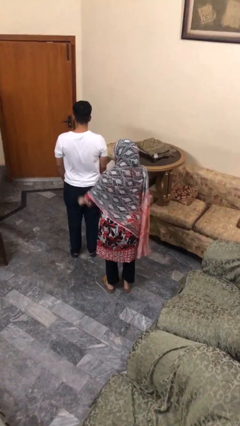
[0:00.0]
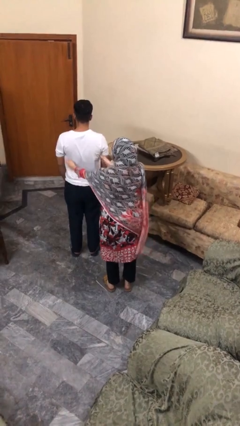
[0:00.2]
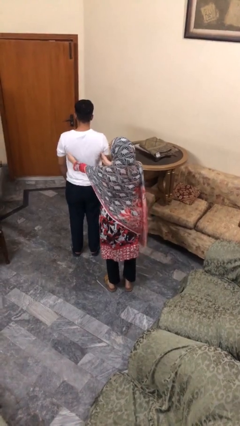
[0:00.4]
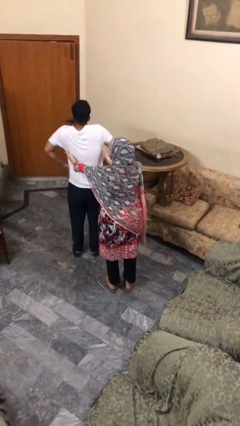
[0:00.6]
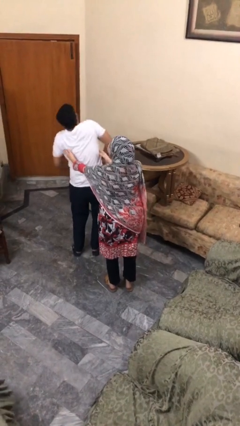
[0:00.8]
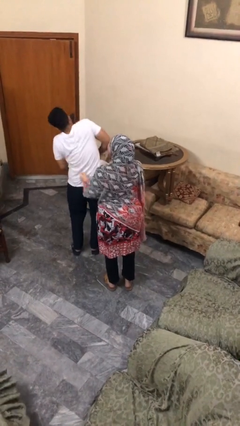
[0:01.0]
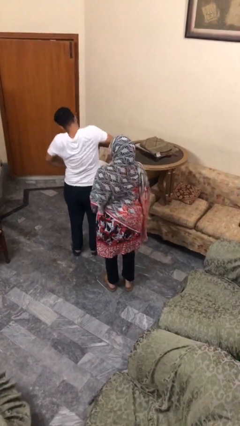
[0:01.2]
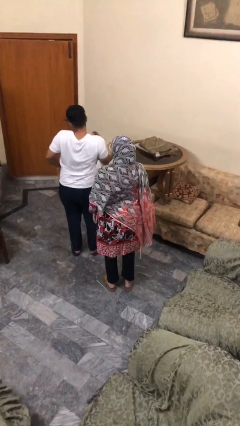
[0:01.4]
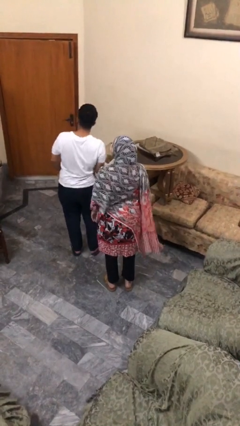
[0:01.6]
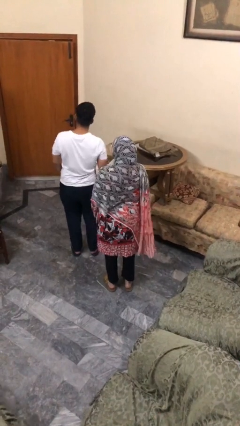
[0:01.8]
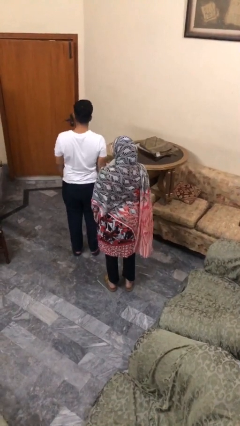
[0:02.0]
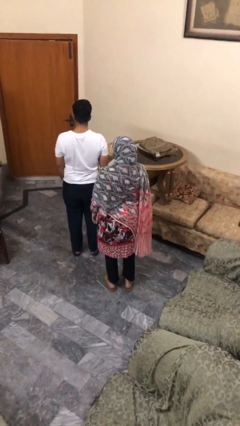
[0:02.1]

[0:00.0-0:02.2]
person tickles person

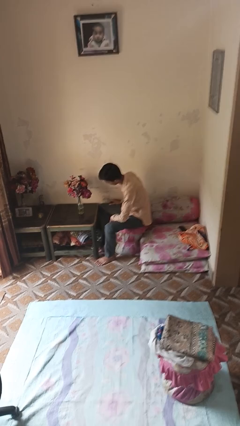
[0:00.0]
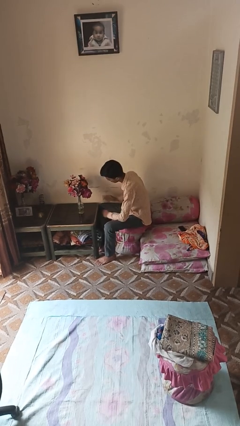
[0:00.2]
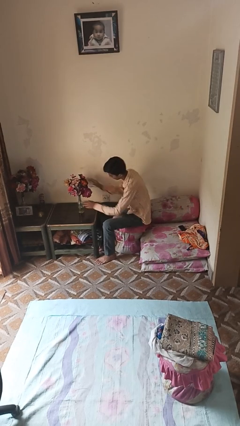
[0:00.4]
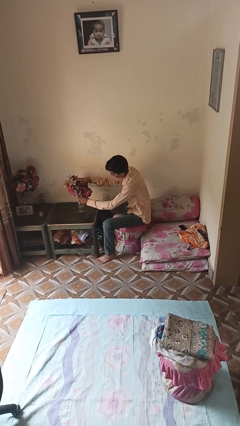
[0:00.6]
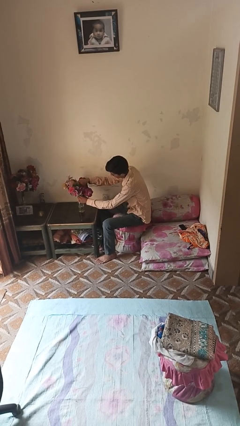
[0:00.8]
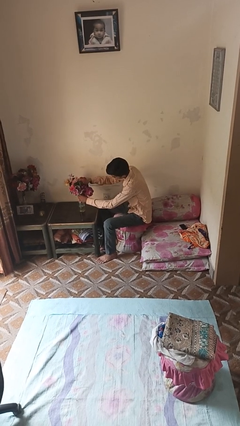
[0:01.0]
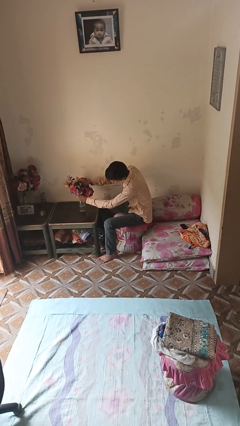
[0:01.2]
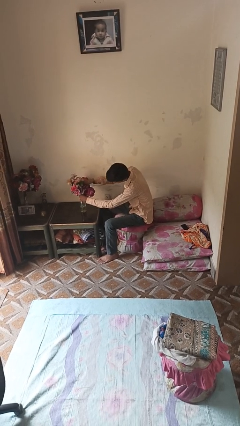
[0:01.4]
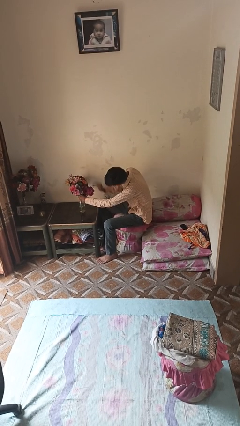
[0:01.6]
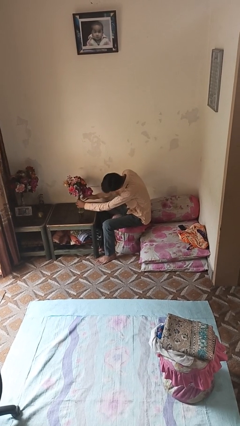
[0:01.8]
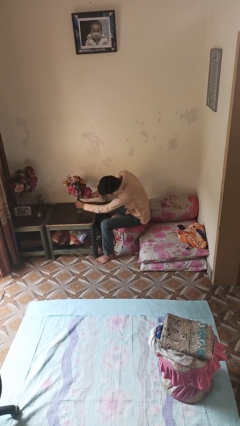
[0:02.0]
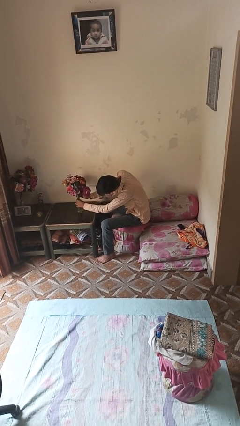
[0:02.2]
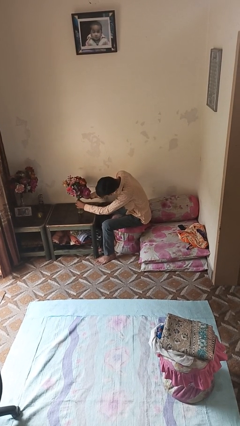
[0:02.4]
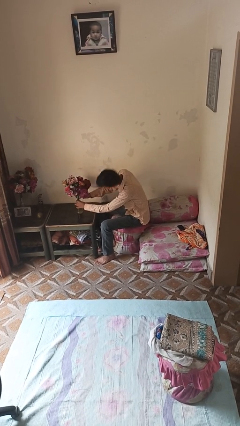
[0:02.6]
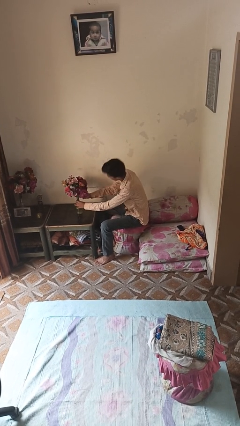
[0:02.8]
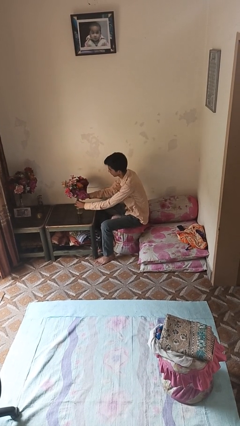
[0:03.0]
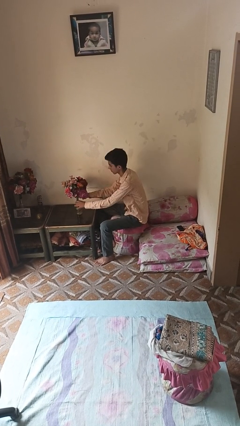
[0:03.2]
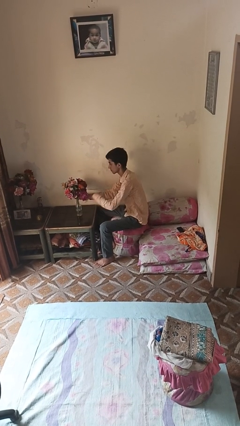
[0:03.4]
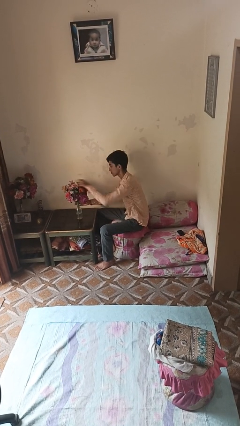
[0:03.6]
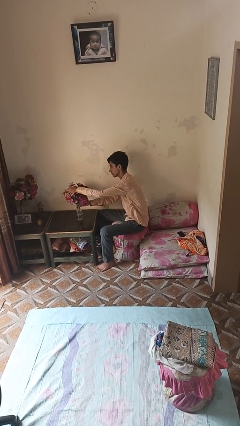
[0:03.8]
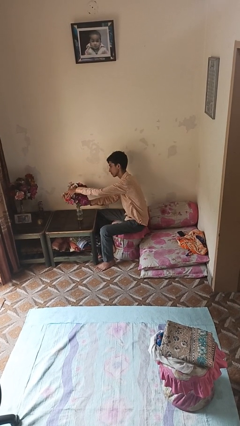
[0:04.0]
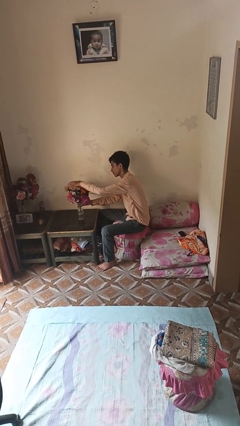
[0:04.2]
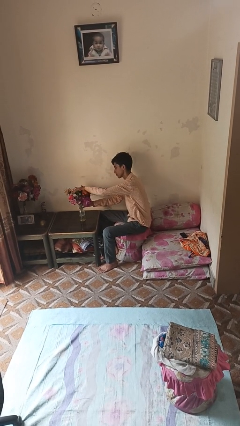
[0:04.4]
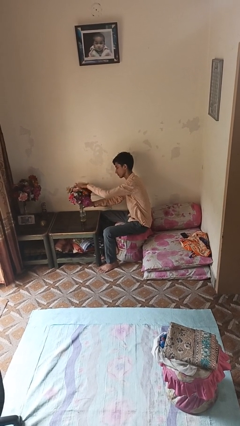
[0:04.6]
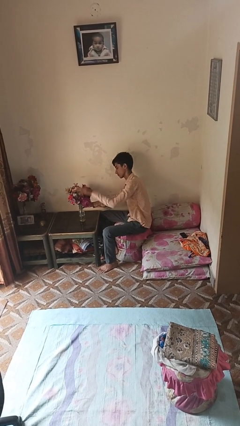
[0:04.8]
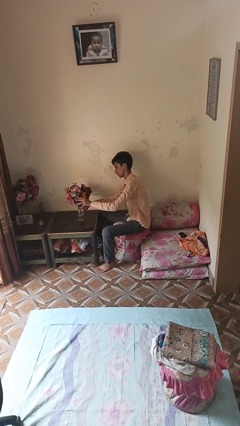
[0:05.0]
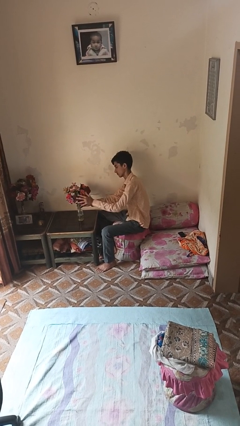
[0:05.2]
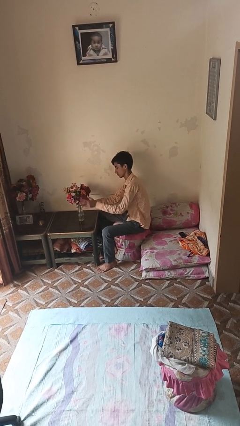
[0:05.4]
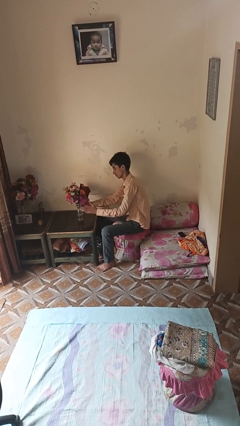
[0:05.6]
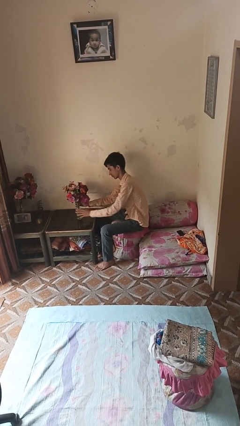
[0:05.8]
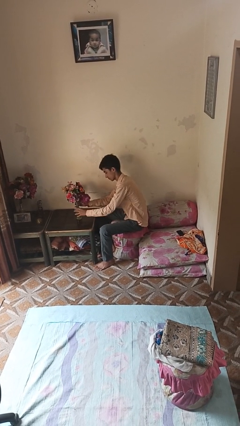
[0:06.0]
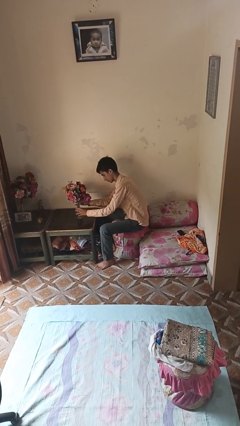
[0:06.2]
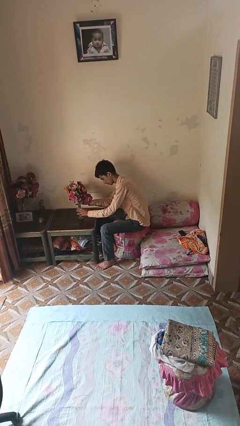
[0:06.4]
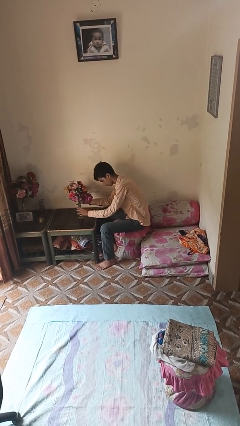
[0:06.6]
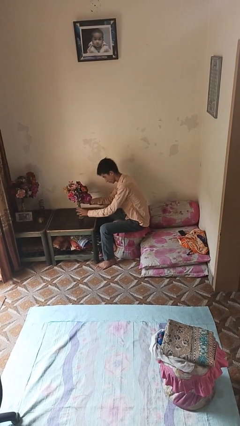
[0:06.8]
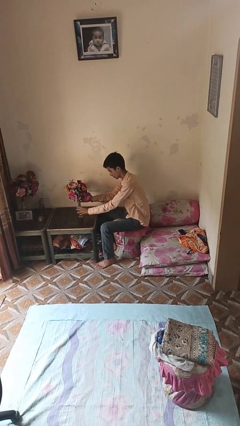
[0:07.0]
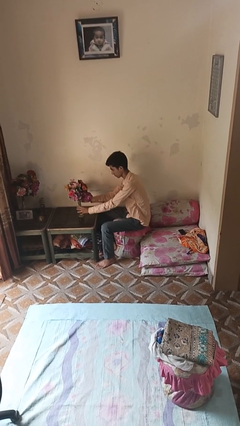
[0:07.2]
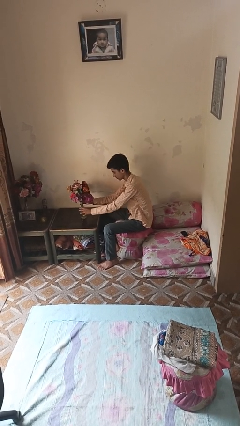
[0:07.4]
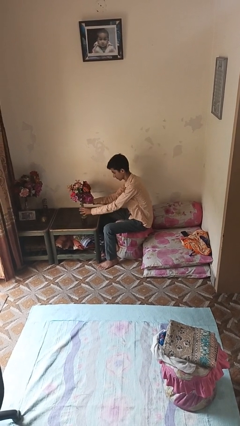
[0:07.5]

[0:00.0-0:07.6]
person arranges flowers in vase

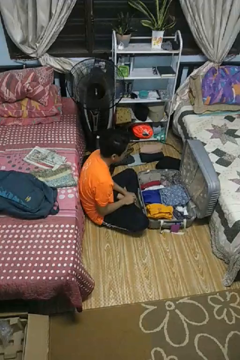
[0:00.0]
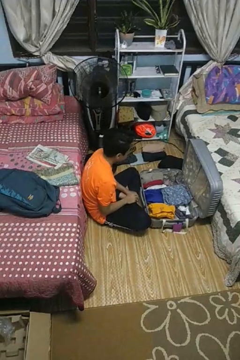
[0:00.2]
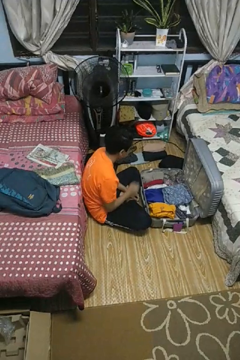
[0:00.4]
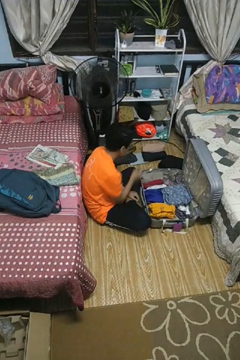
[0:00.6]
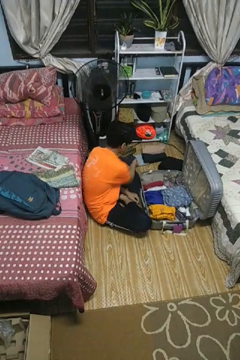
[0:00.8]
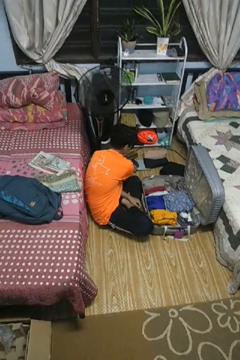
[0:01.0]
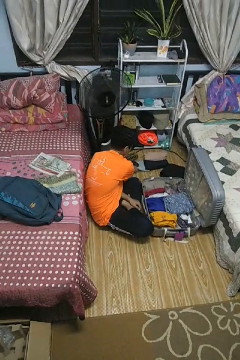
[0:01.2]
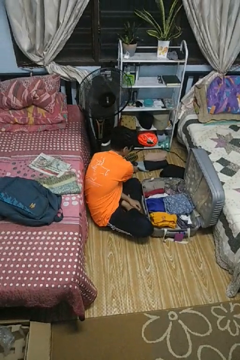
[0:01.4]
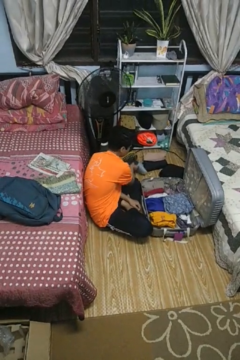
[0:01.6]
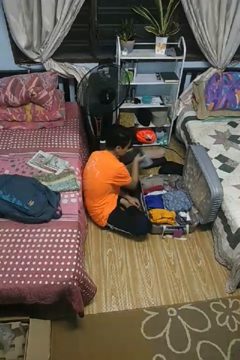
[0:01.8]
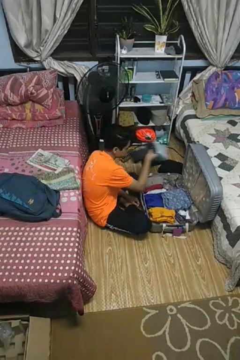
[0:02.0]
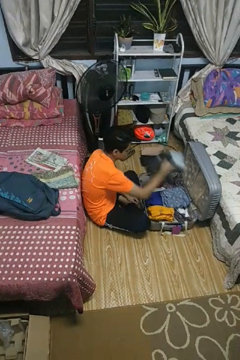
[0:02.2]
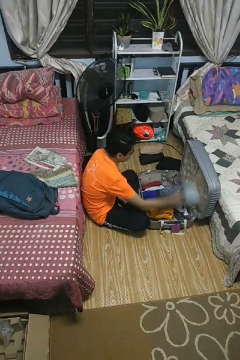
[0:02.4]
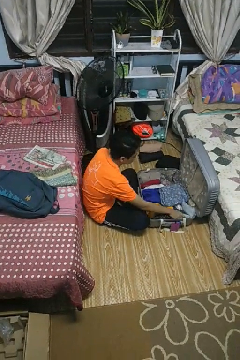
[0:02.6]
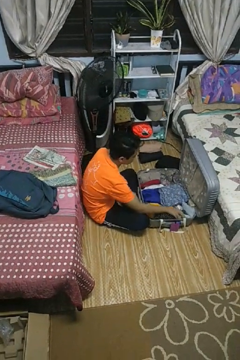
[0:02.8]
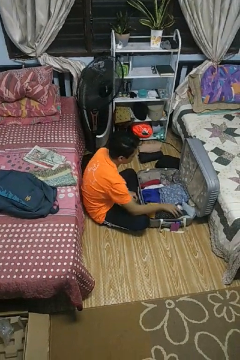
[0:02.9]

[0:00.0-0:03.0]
person loads clothes into suitcase

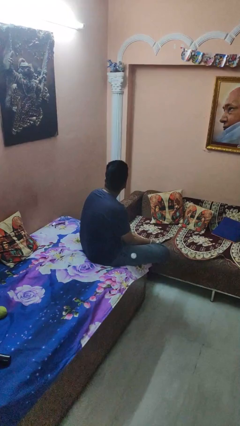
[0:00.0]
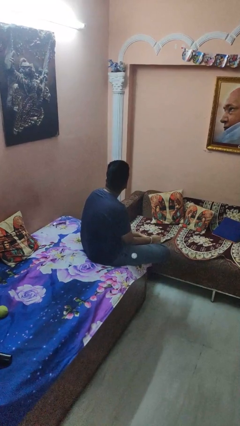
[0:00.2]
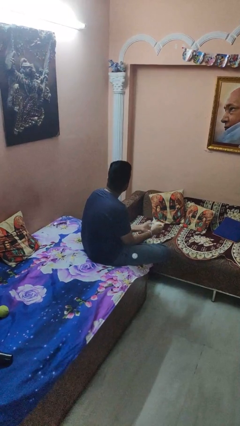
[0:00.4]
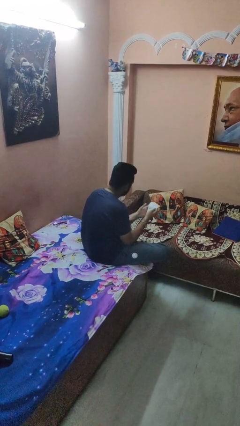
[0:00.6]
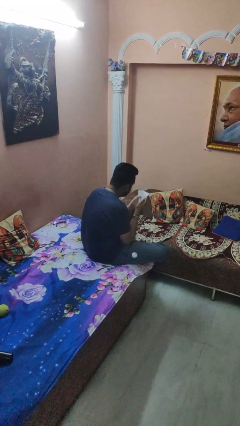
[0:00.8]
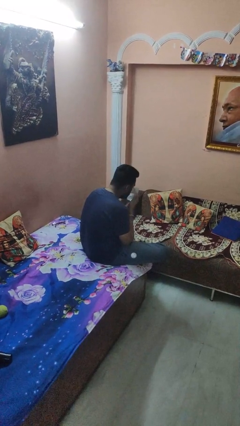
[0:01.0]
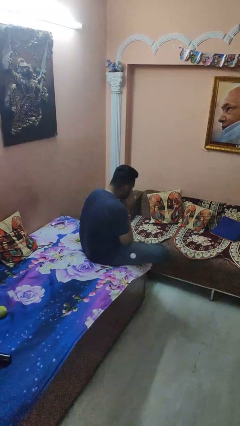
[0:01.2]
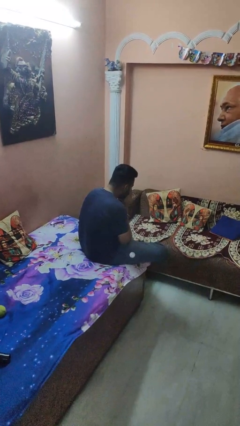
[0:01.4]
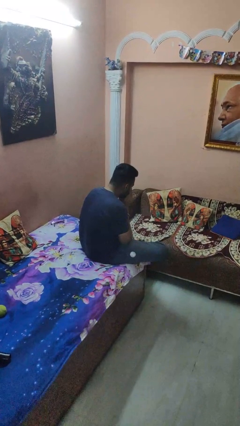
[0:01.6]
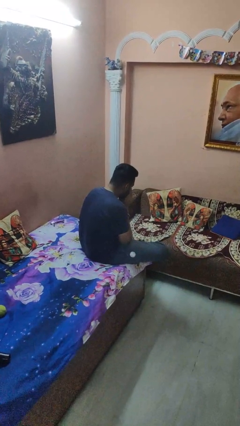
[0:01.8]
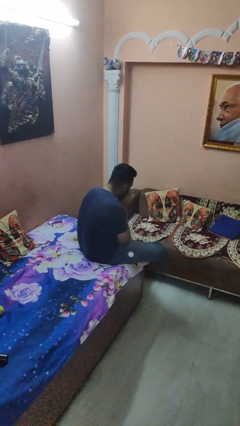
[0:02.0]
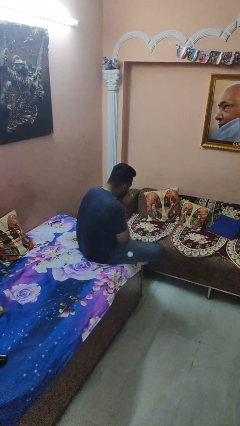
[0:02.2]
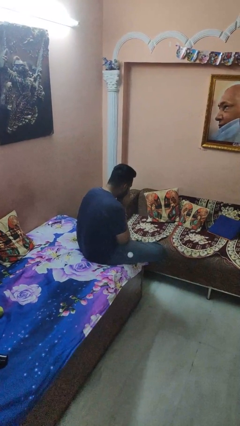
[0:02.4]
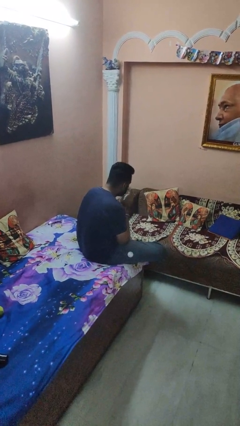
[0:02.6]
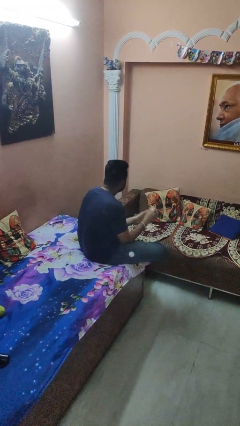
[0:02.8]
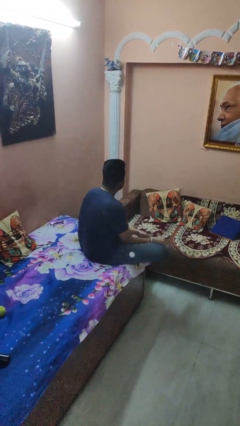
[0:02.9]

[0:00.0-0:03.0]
person blows nose

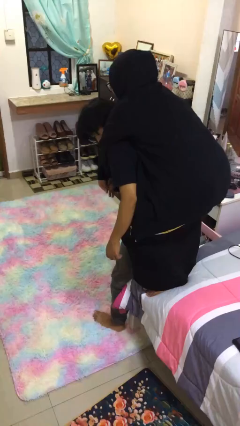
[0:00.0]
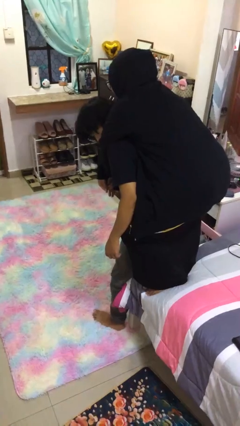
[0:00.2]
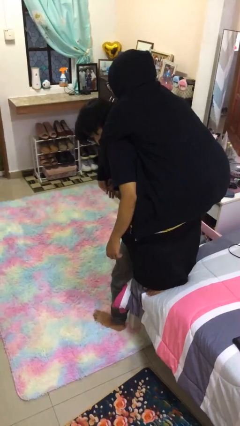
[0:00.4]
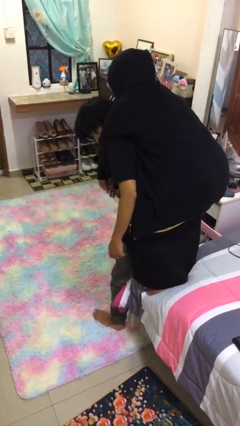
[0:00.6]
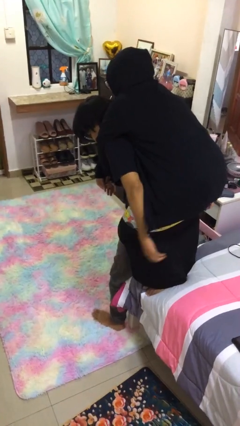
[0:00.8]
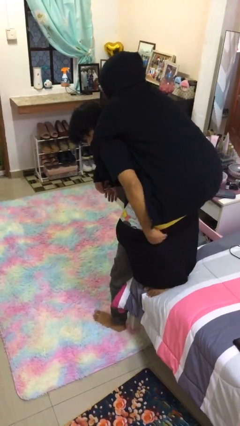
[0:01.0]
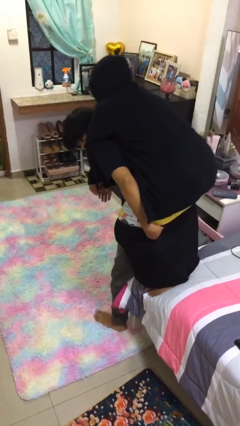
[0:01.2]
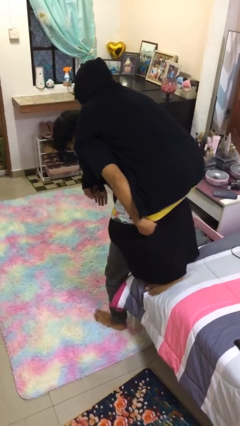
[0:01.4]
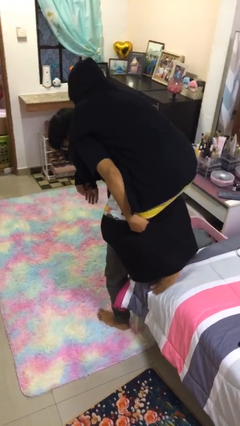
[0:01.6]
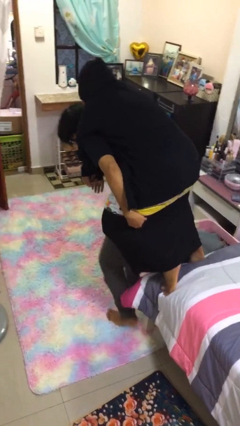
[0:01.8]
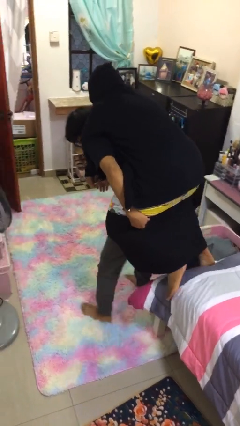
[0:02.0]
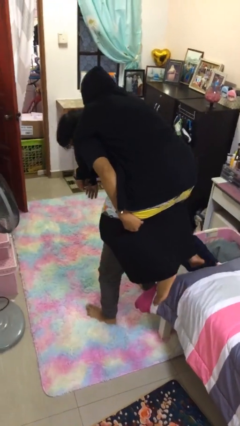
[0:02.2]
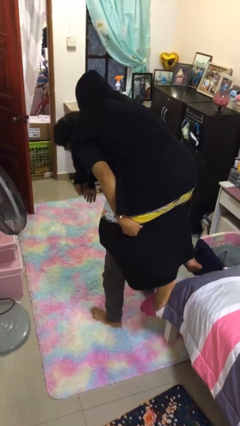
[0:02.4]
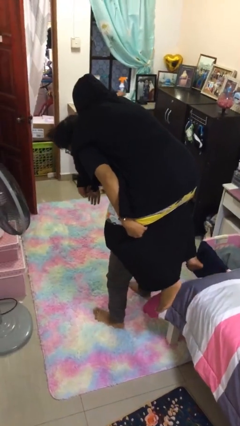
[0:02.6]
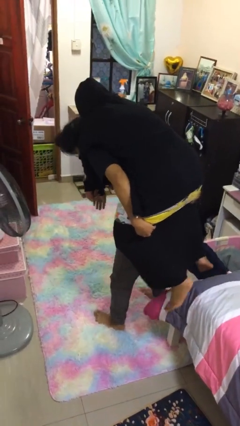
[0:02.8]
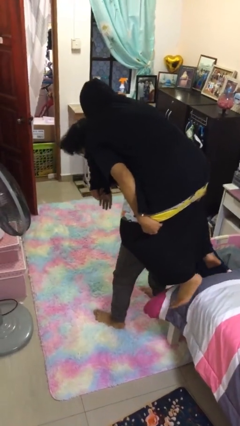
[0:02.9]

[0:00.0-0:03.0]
person carries person over shoulder
